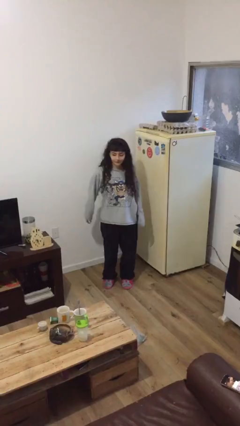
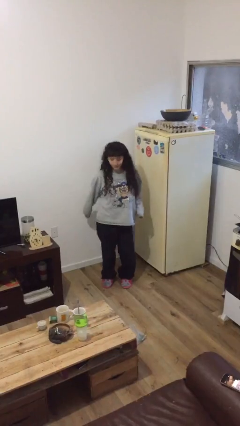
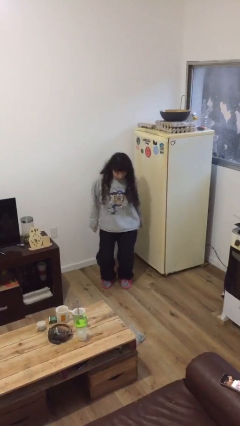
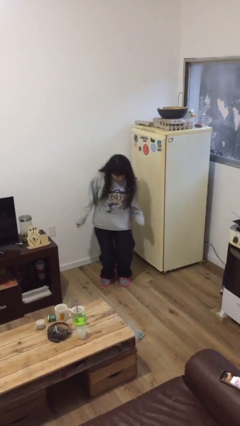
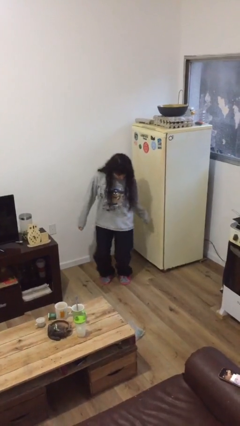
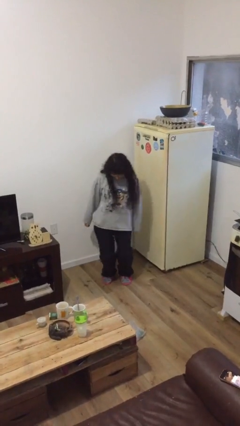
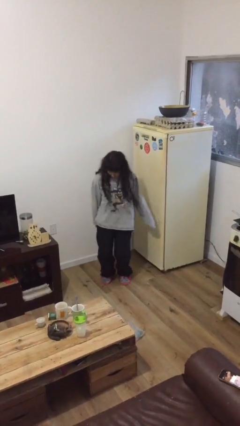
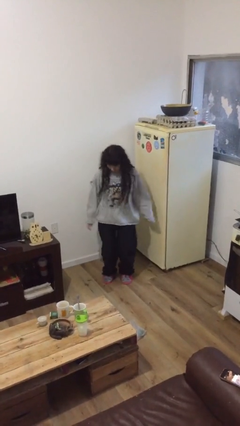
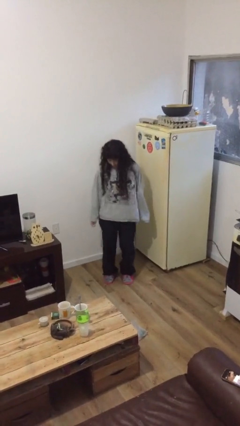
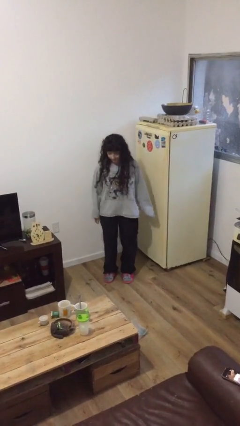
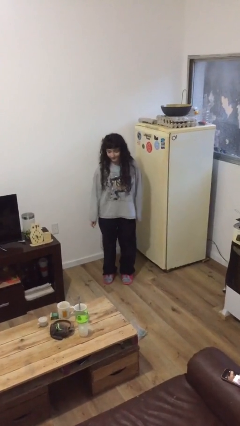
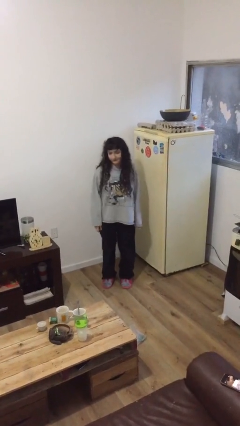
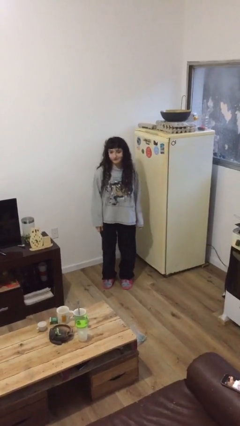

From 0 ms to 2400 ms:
person wiggles hips

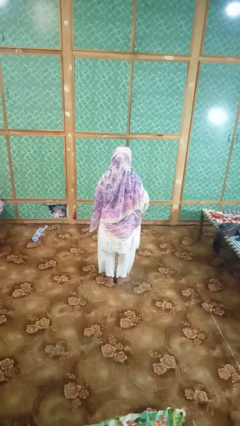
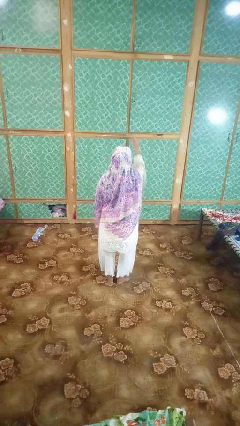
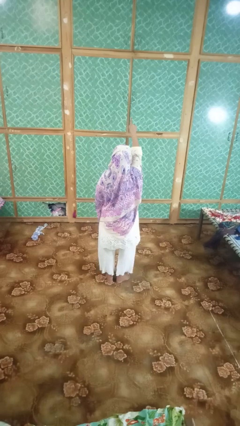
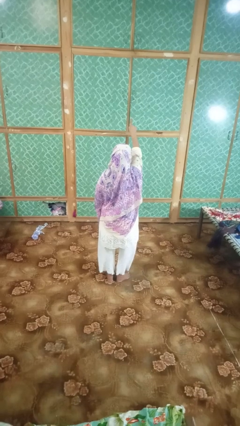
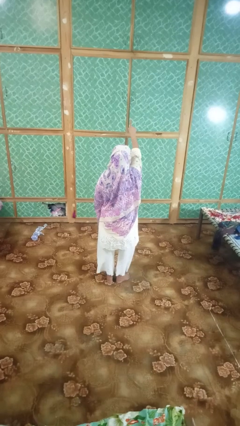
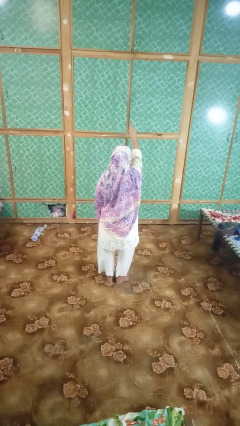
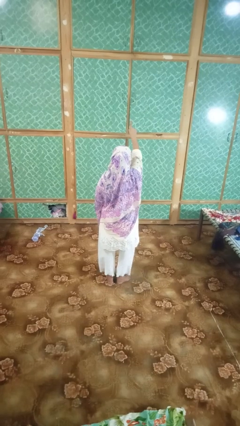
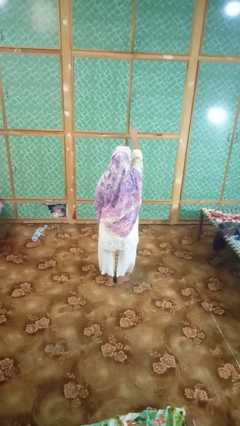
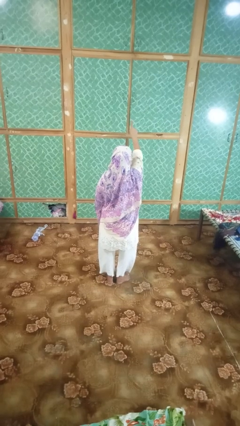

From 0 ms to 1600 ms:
person gestures number one

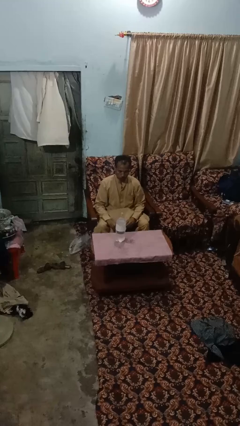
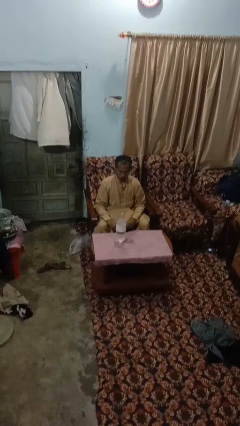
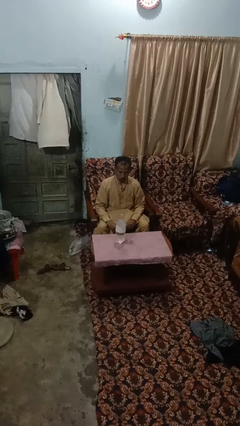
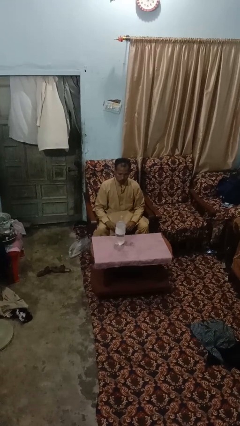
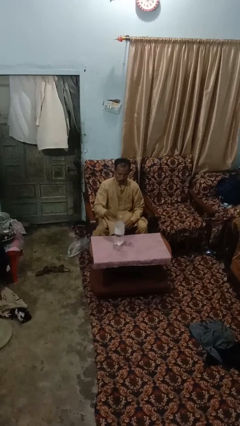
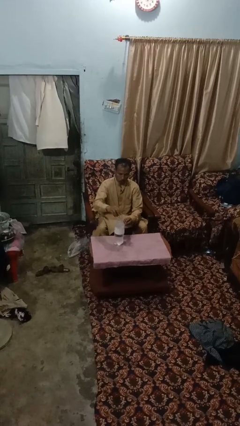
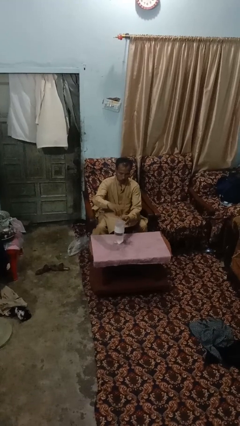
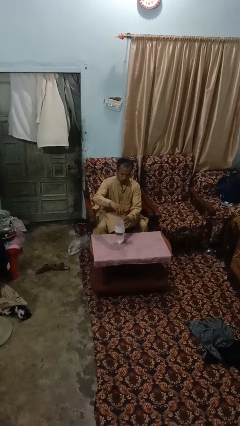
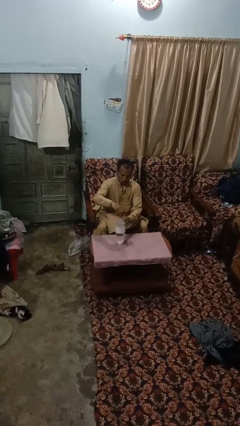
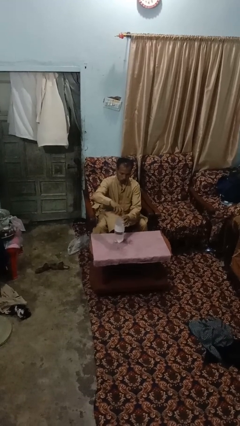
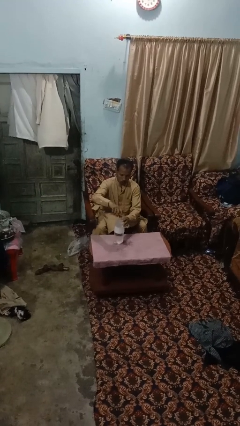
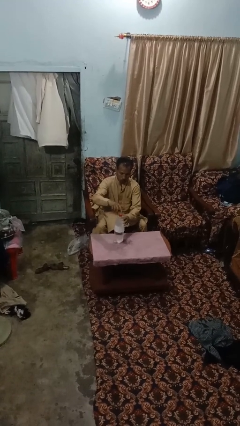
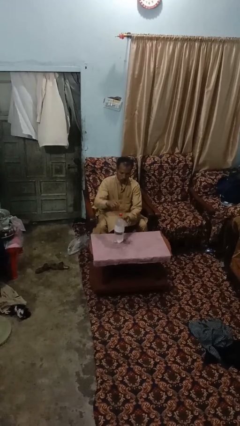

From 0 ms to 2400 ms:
person screws lid to bottle

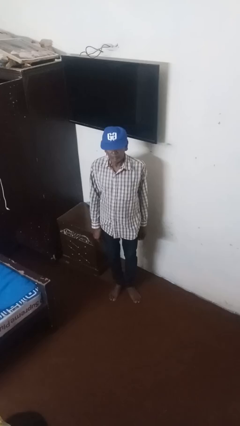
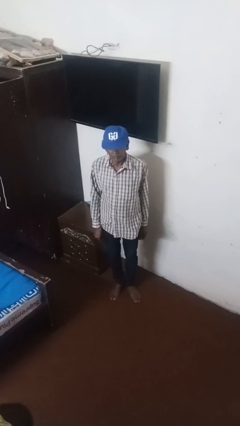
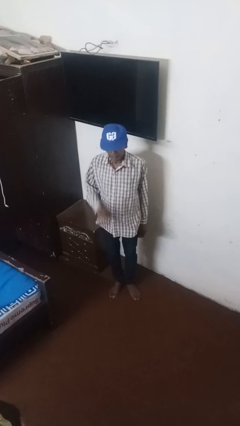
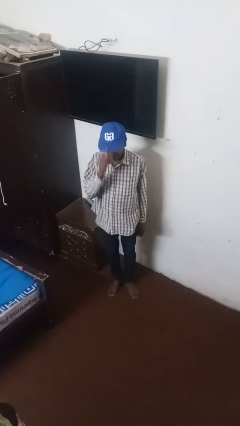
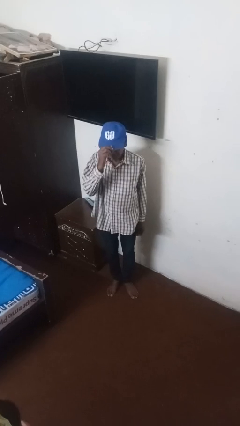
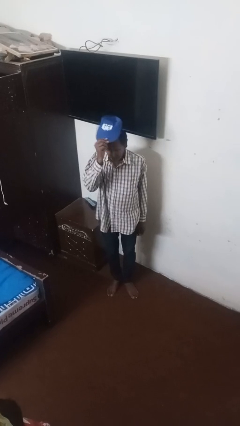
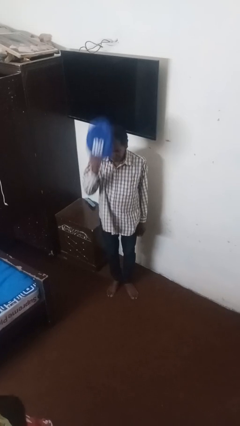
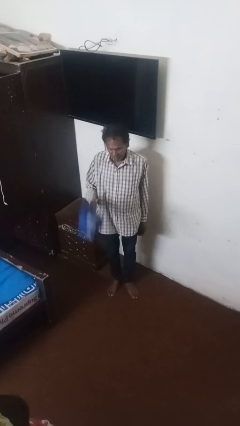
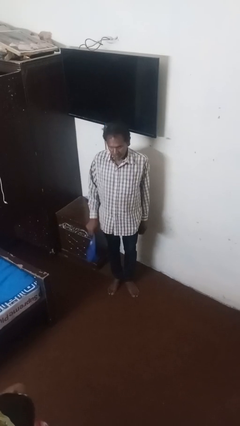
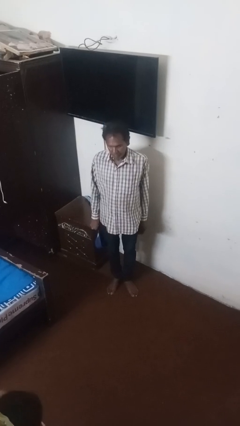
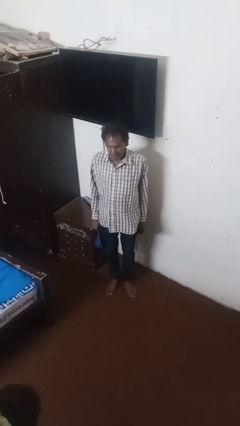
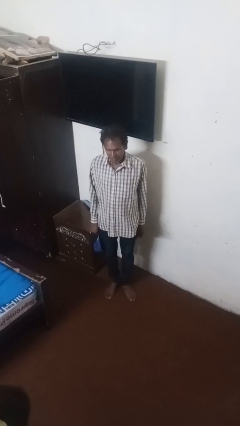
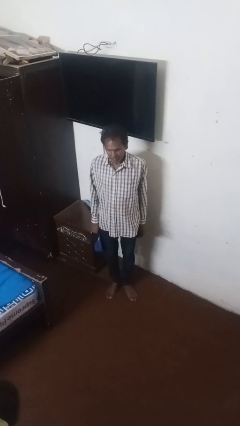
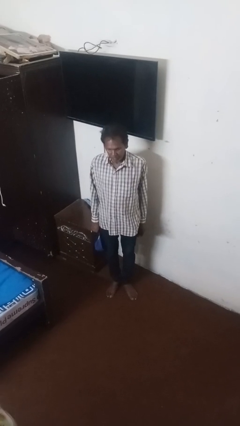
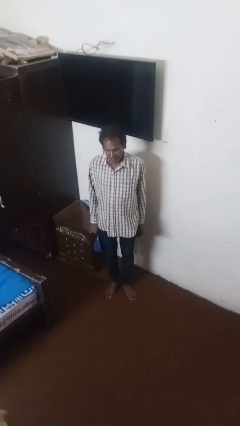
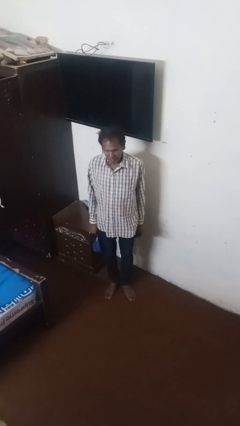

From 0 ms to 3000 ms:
person takes off hat

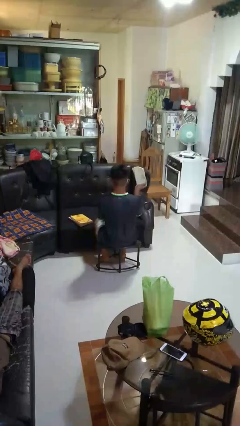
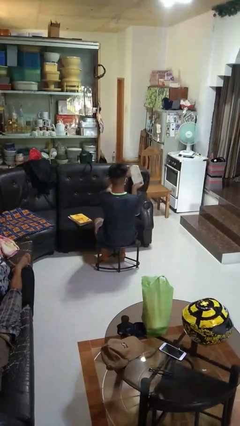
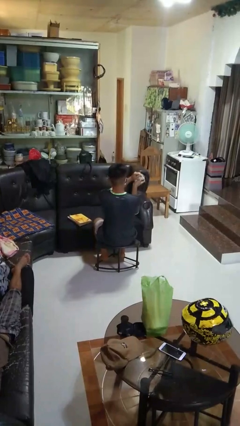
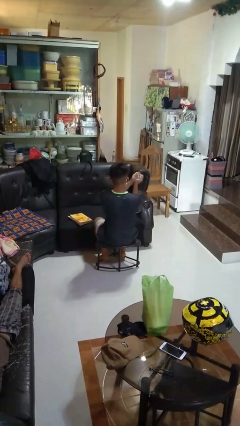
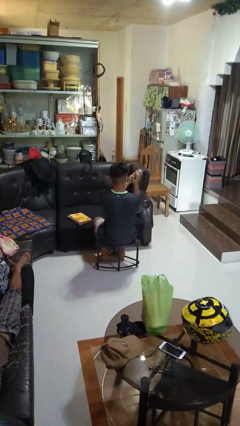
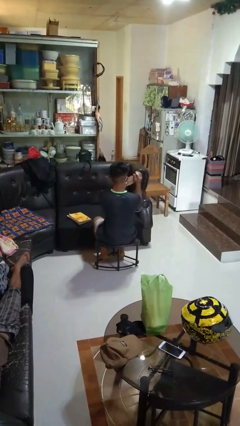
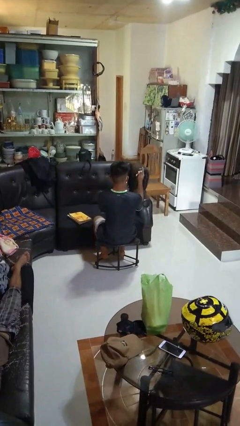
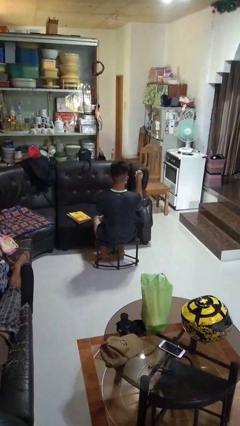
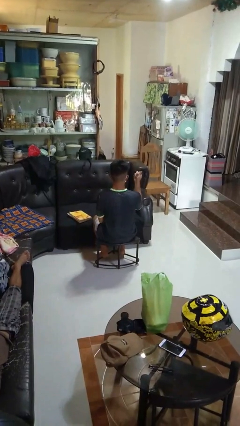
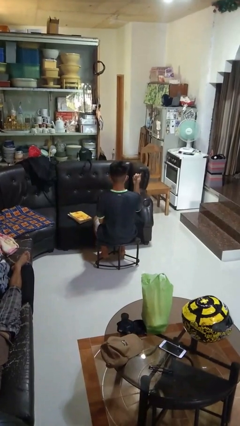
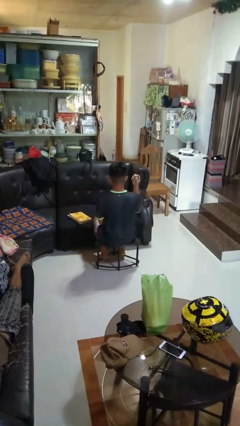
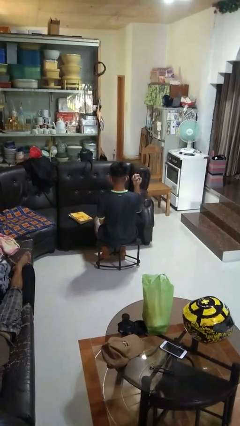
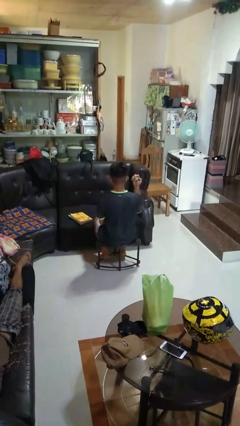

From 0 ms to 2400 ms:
person crumples paper

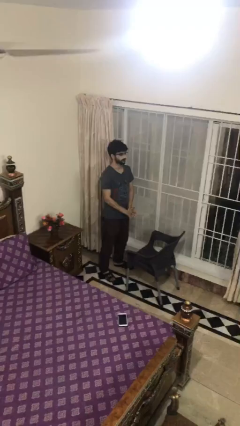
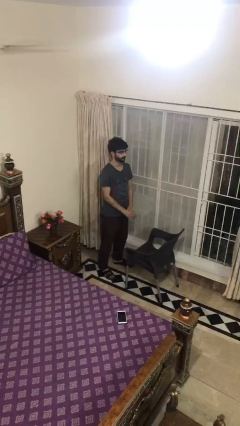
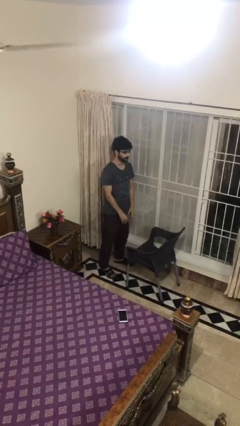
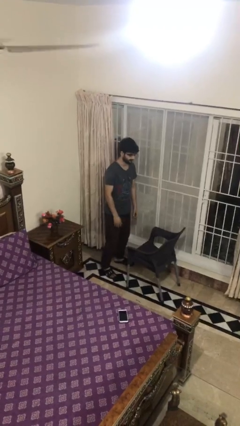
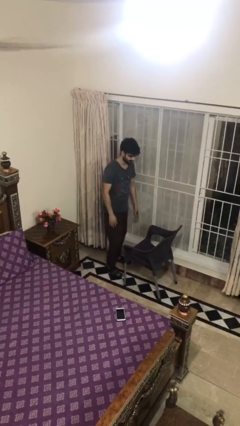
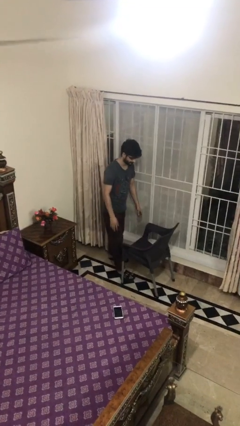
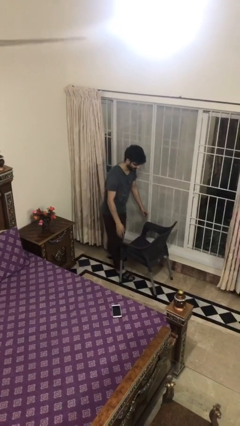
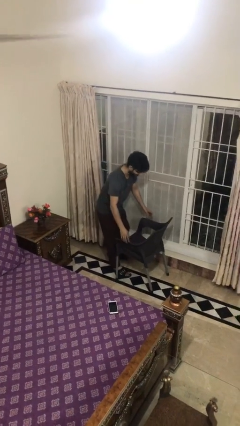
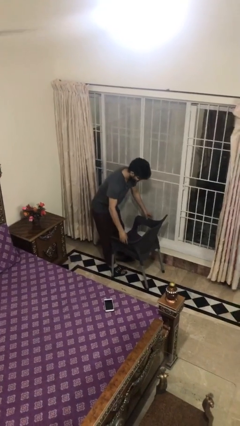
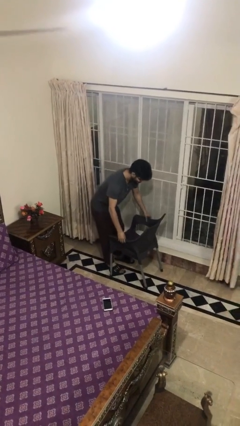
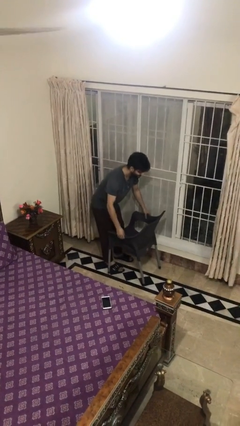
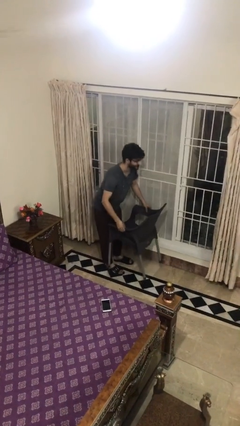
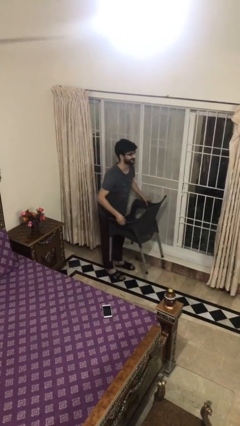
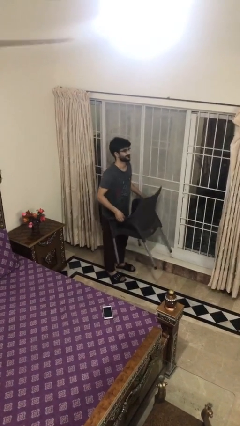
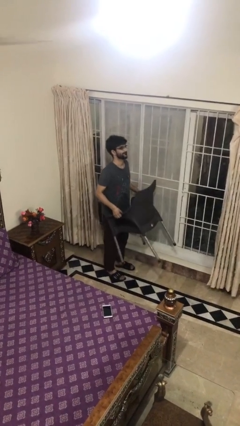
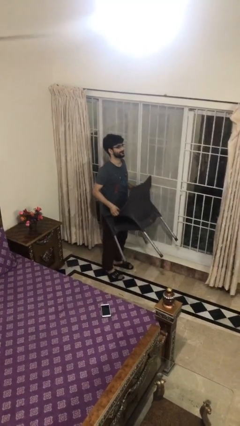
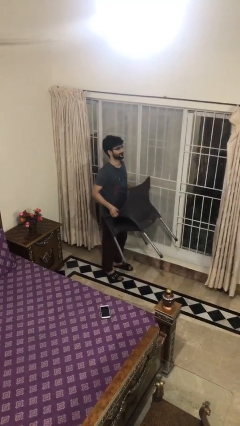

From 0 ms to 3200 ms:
person picks up object from floor

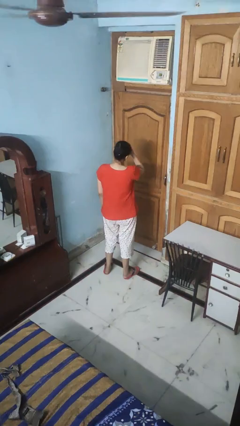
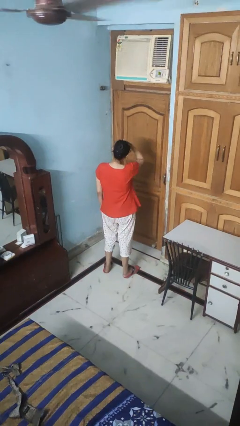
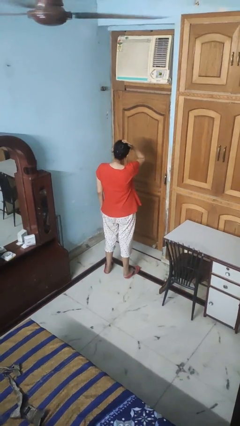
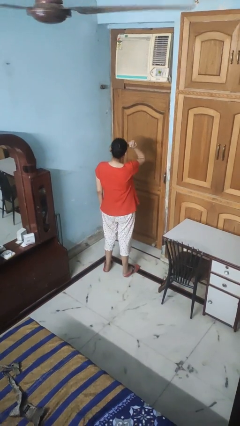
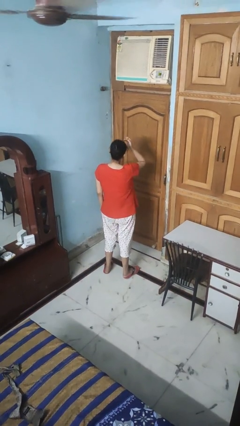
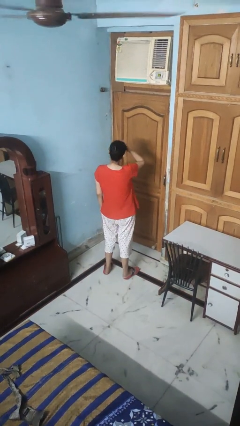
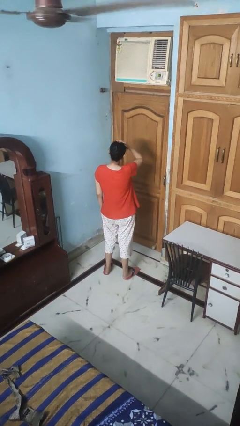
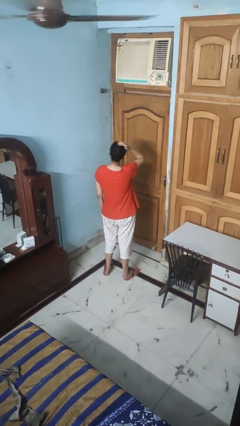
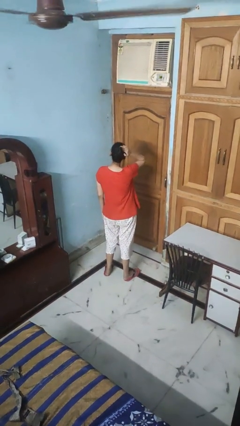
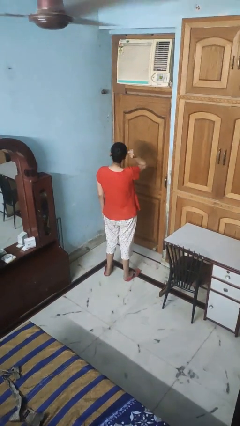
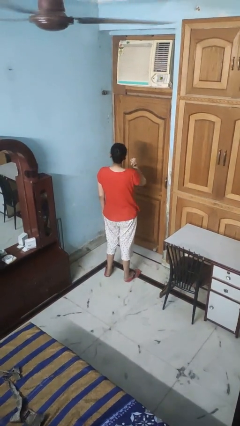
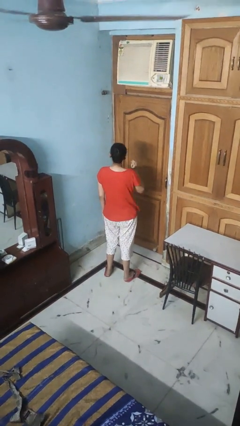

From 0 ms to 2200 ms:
person strokes hair
